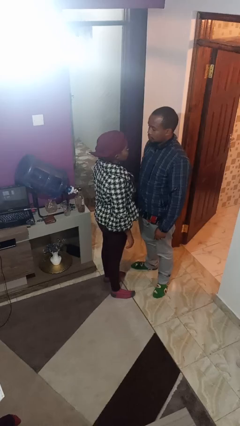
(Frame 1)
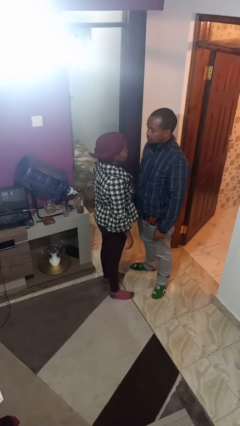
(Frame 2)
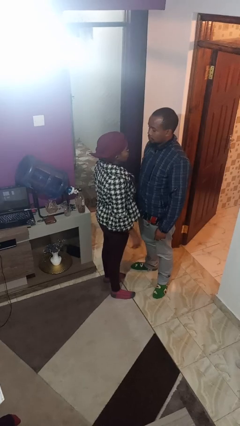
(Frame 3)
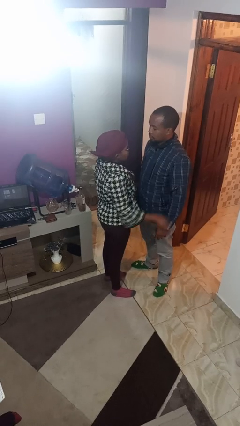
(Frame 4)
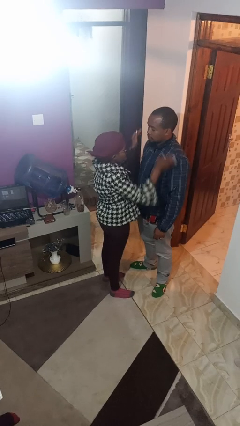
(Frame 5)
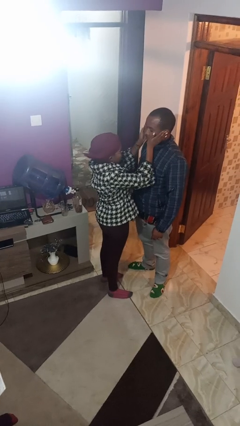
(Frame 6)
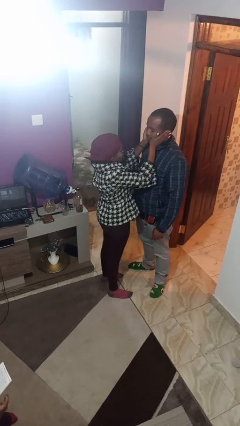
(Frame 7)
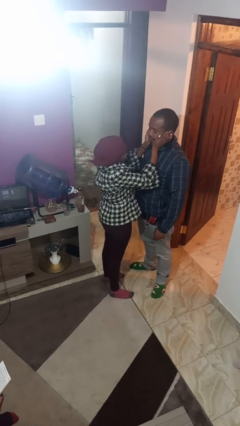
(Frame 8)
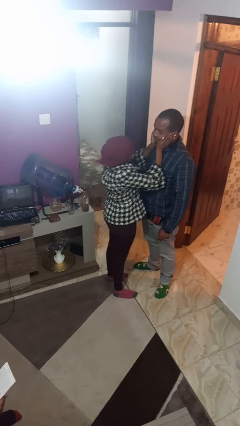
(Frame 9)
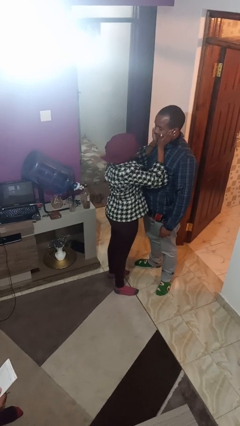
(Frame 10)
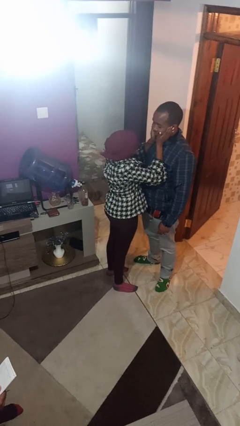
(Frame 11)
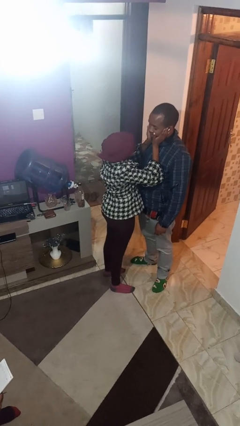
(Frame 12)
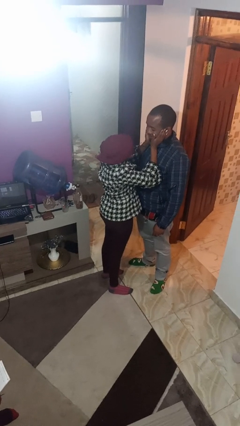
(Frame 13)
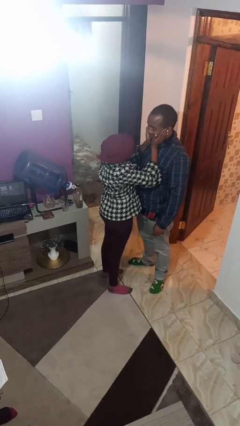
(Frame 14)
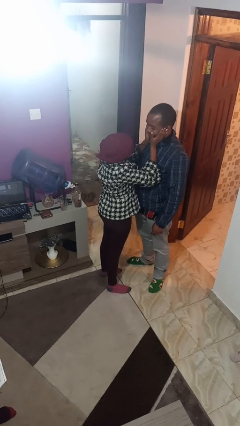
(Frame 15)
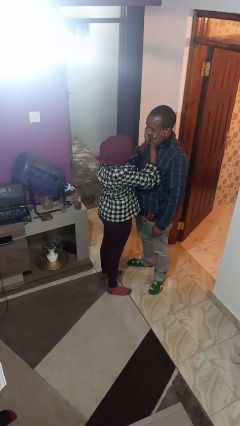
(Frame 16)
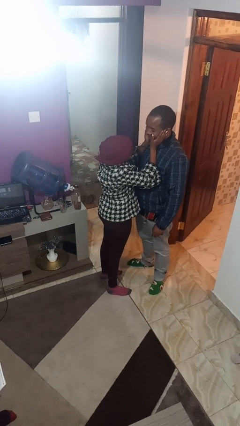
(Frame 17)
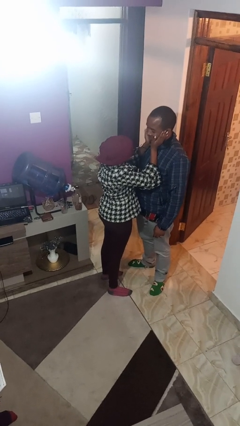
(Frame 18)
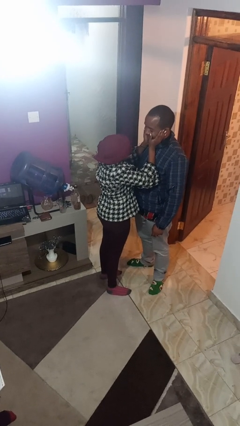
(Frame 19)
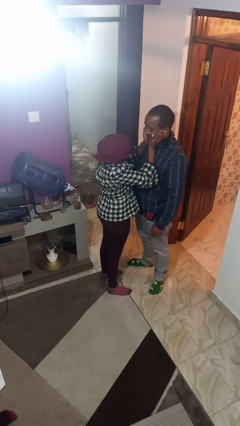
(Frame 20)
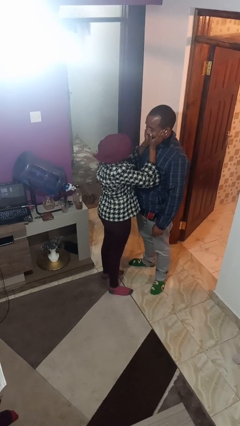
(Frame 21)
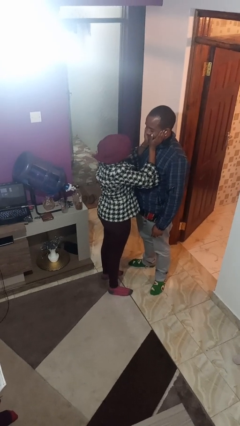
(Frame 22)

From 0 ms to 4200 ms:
person touches face of person

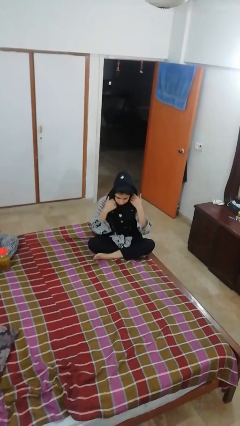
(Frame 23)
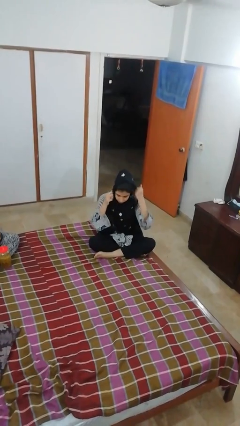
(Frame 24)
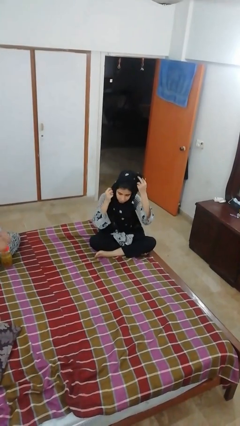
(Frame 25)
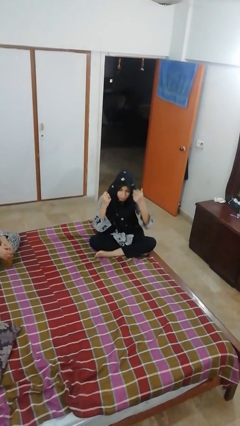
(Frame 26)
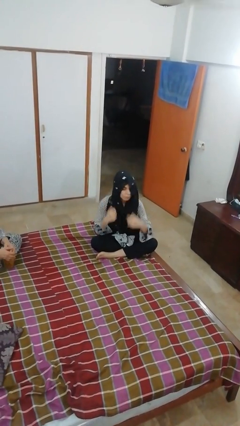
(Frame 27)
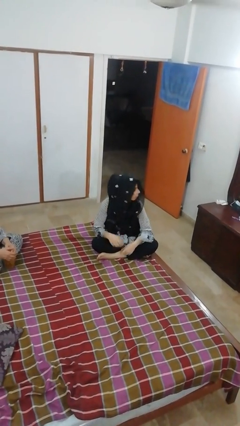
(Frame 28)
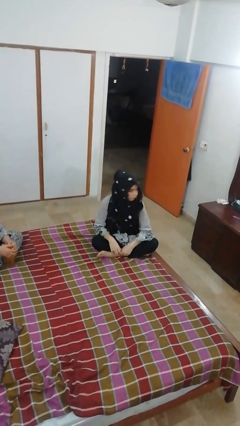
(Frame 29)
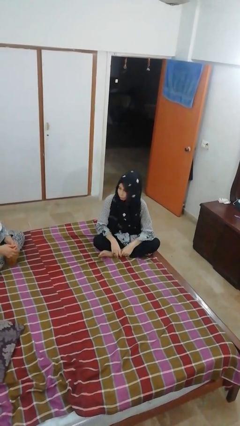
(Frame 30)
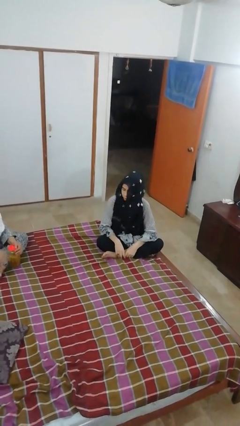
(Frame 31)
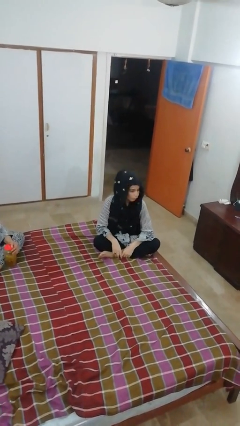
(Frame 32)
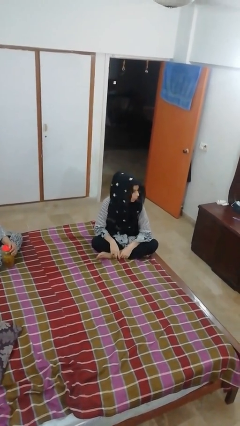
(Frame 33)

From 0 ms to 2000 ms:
person shakes head

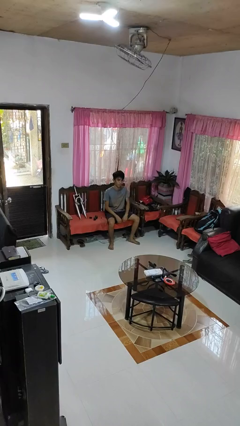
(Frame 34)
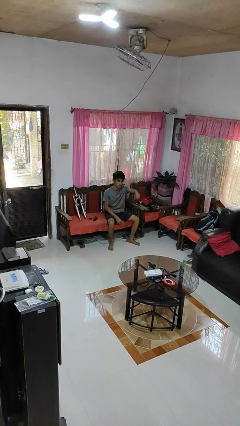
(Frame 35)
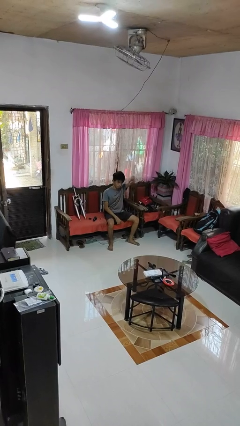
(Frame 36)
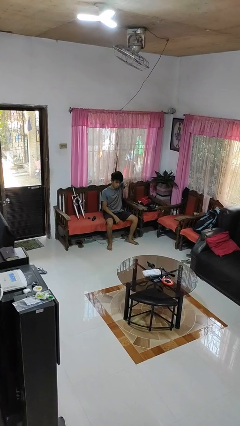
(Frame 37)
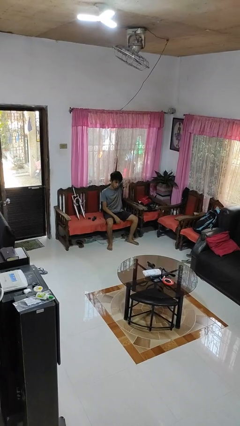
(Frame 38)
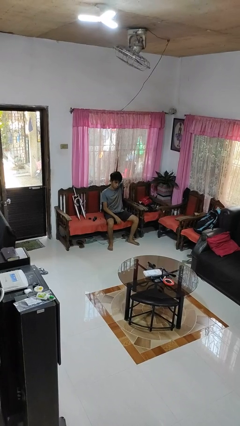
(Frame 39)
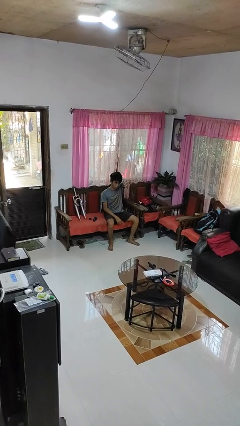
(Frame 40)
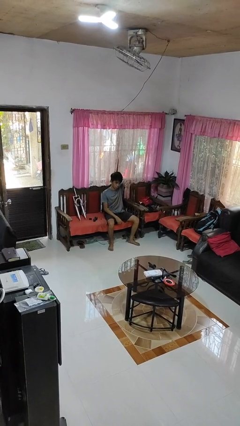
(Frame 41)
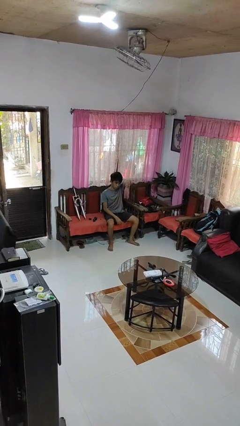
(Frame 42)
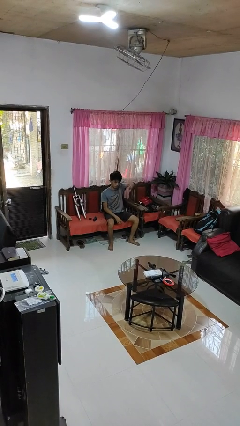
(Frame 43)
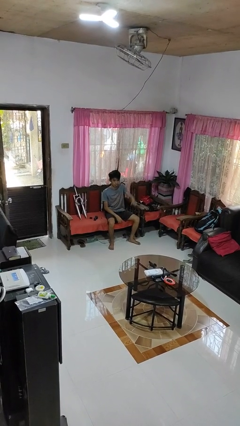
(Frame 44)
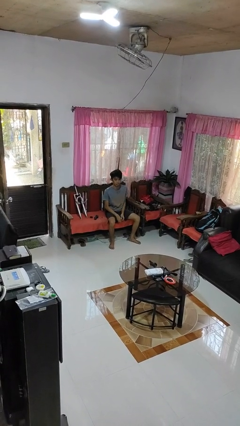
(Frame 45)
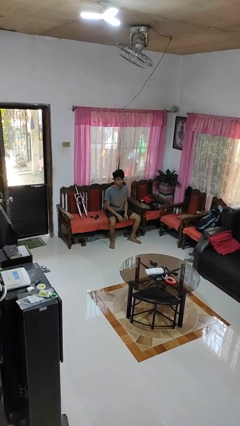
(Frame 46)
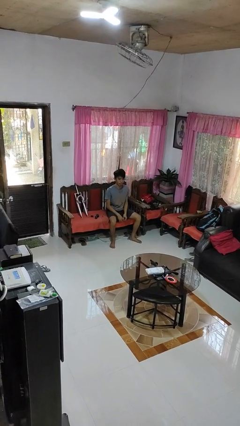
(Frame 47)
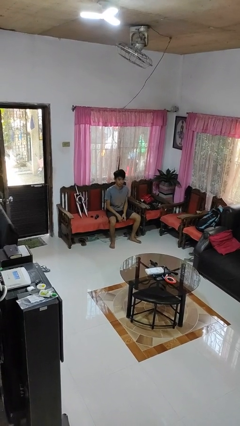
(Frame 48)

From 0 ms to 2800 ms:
person gestures thumbs down

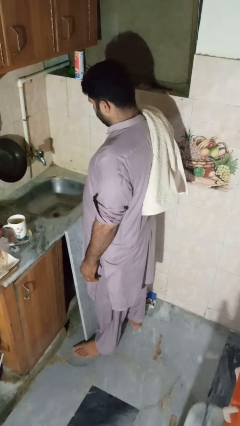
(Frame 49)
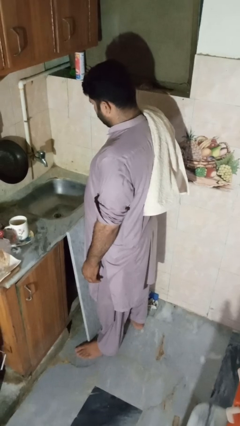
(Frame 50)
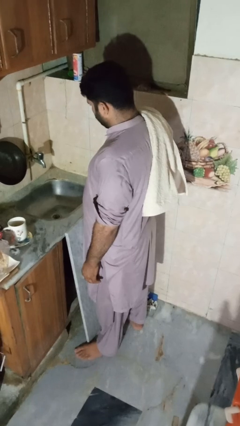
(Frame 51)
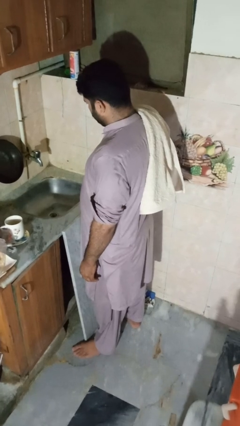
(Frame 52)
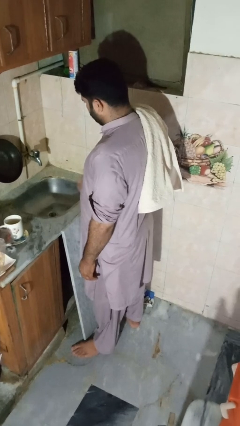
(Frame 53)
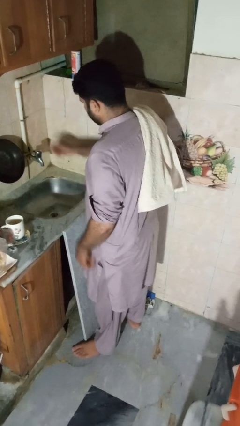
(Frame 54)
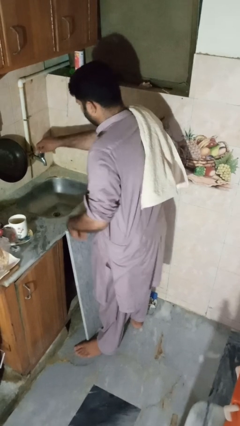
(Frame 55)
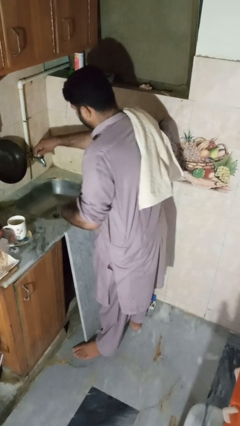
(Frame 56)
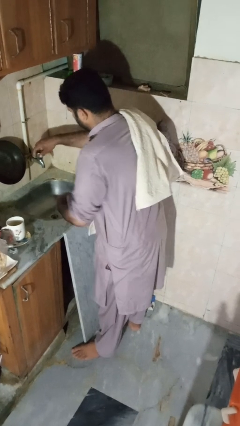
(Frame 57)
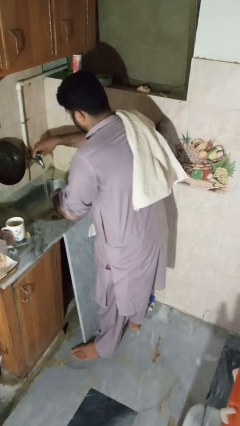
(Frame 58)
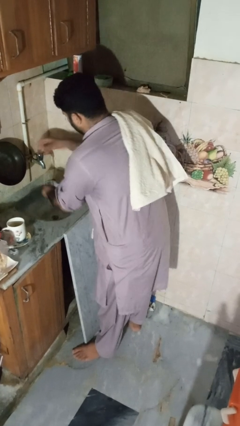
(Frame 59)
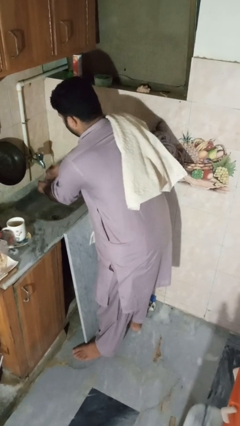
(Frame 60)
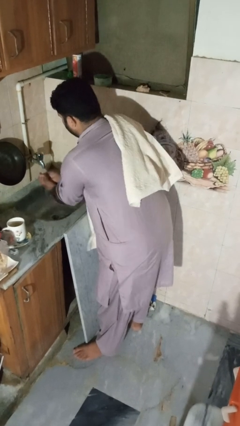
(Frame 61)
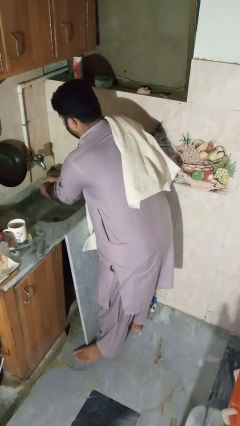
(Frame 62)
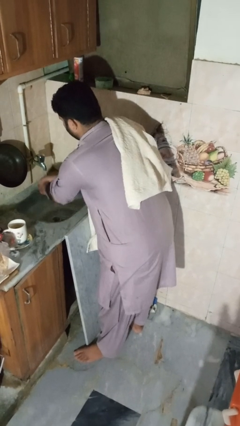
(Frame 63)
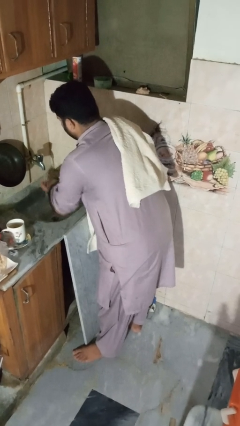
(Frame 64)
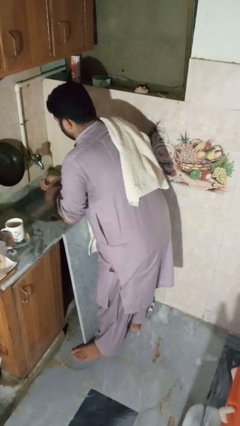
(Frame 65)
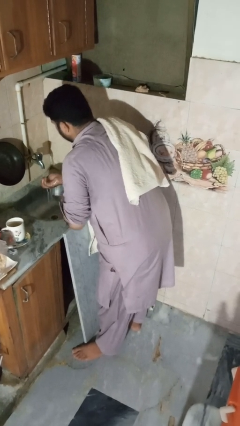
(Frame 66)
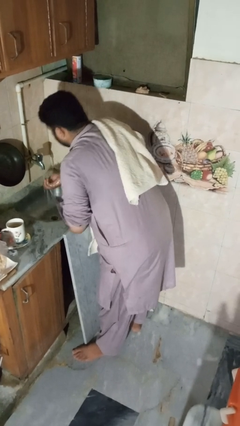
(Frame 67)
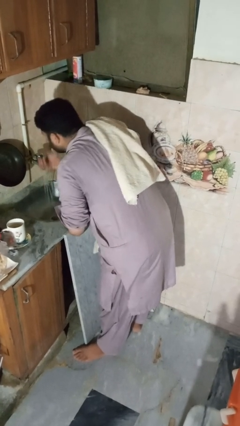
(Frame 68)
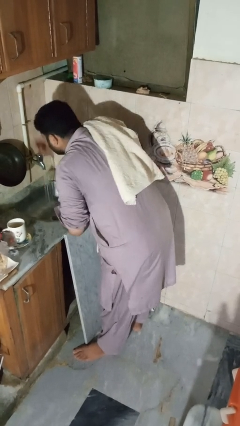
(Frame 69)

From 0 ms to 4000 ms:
person washes face

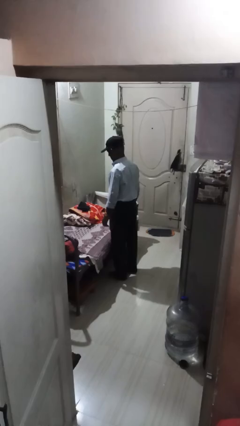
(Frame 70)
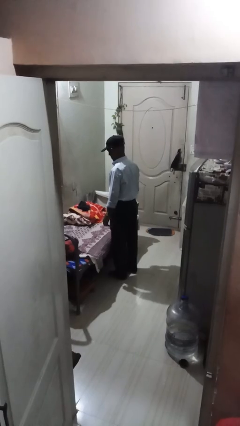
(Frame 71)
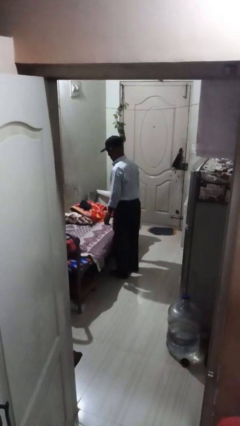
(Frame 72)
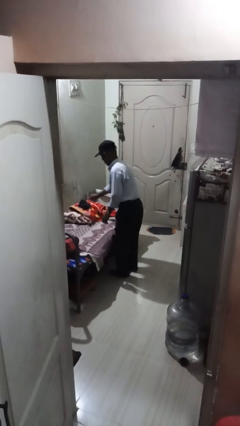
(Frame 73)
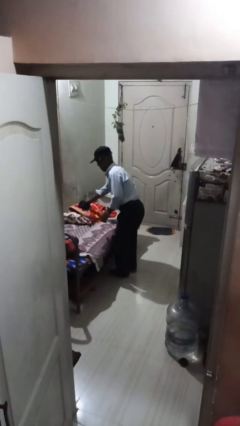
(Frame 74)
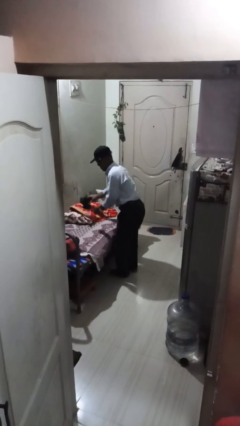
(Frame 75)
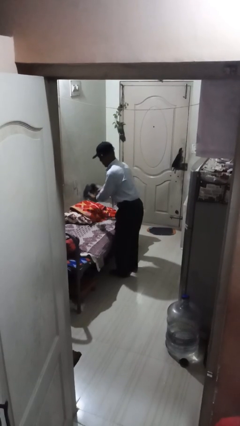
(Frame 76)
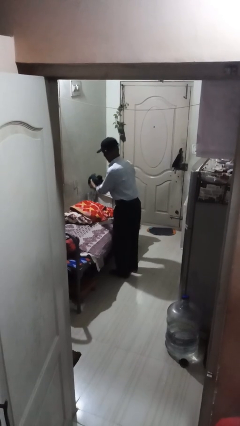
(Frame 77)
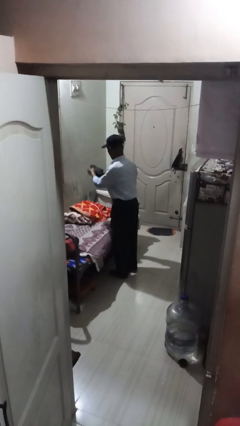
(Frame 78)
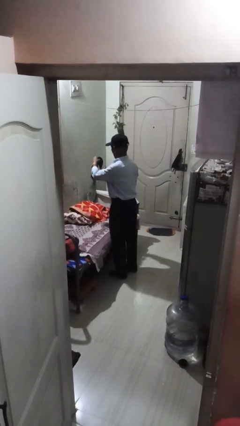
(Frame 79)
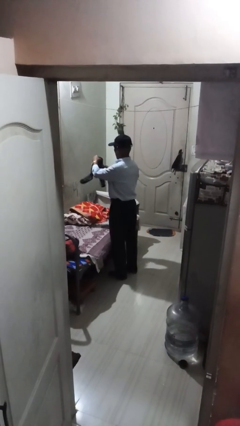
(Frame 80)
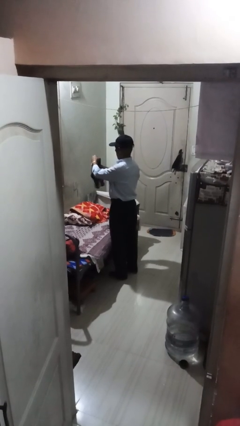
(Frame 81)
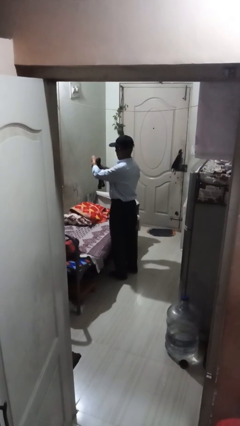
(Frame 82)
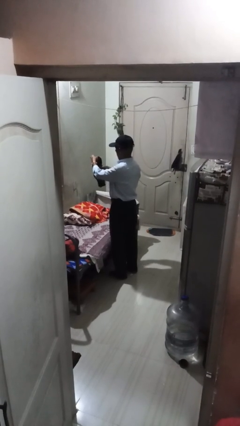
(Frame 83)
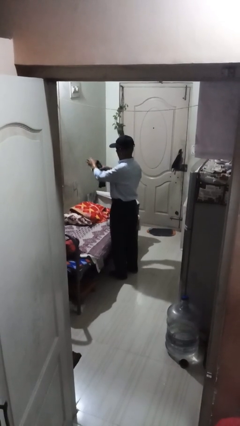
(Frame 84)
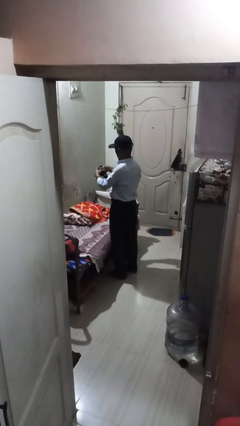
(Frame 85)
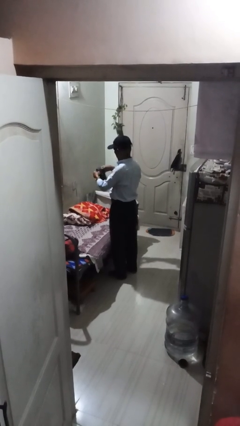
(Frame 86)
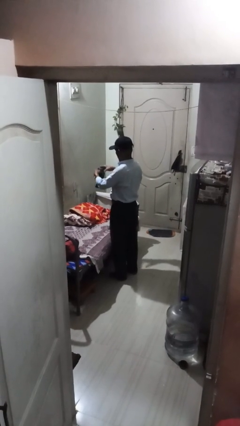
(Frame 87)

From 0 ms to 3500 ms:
person folds socks

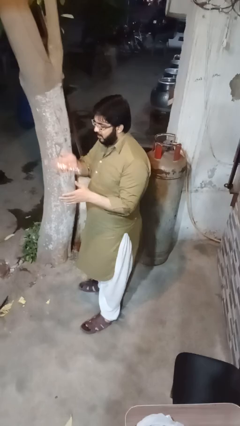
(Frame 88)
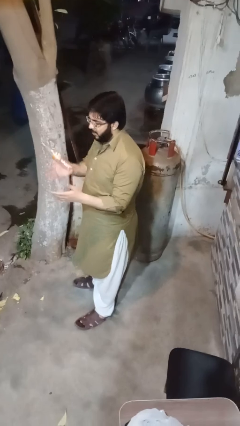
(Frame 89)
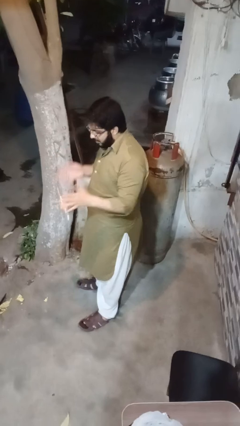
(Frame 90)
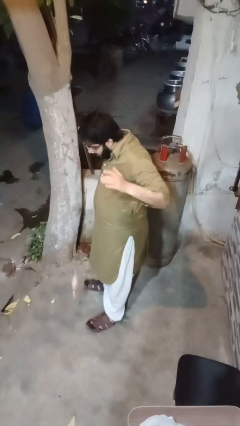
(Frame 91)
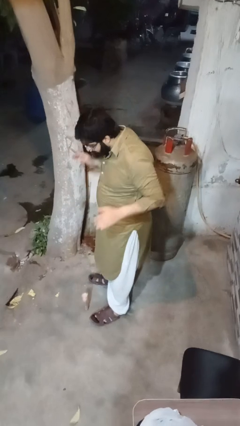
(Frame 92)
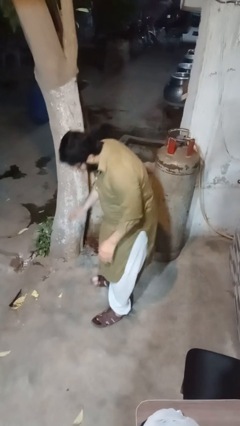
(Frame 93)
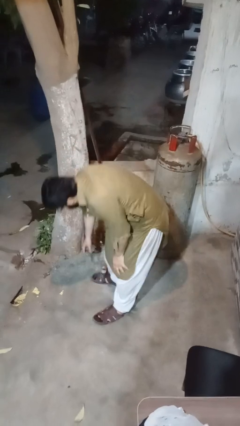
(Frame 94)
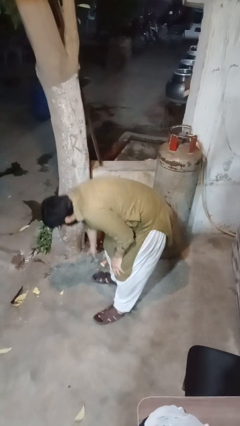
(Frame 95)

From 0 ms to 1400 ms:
person drops object
